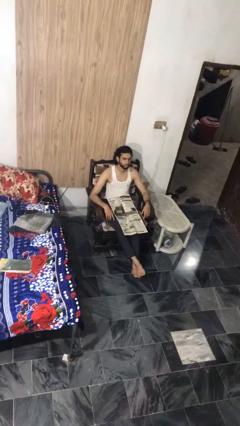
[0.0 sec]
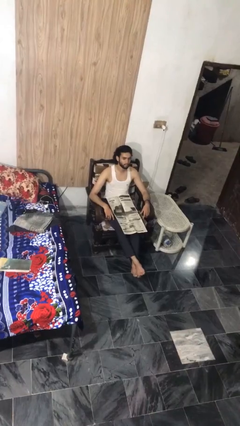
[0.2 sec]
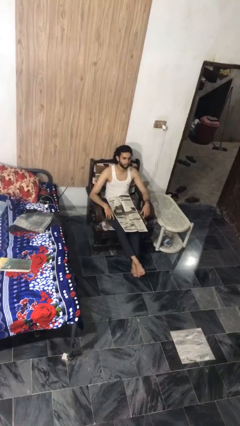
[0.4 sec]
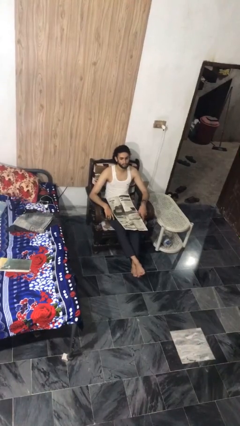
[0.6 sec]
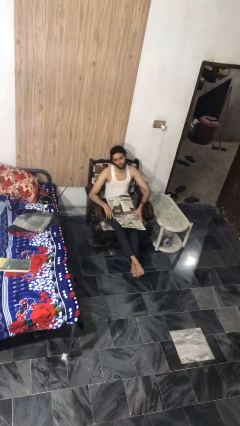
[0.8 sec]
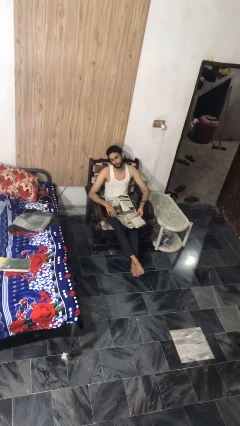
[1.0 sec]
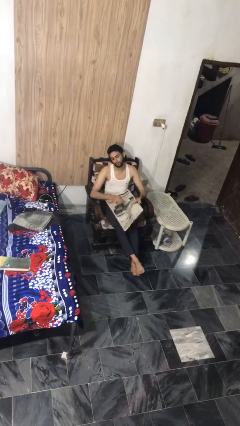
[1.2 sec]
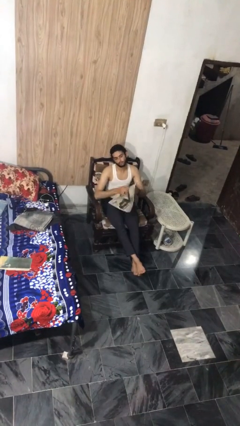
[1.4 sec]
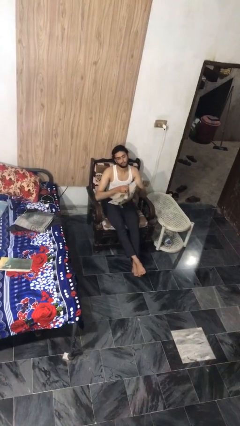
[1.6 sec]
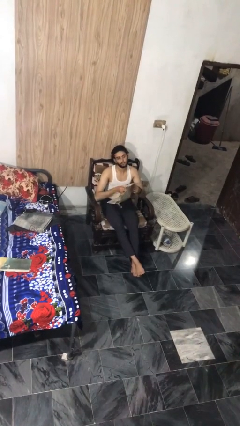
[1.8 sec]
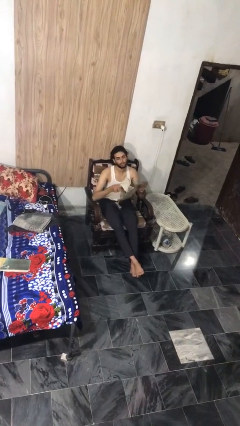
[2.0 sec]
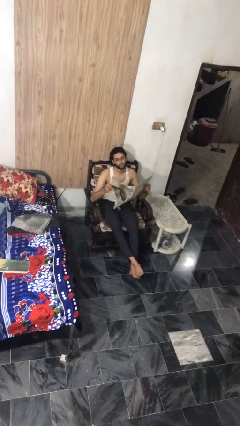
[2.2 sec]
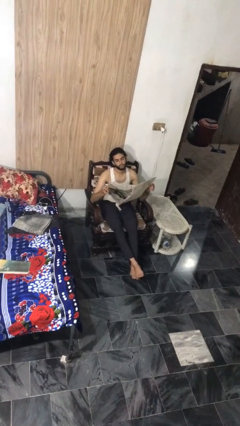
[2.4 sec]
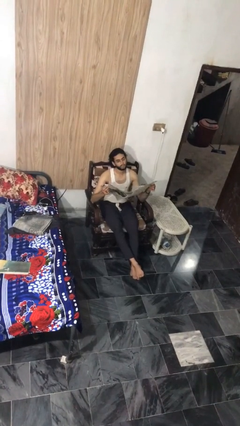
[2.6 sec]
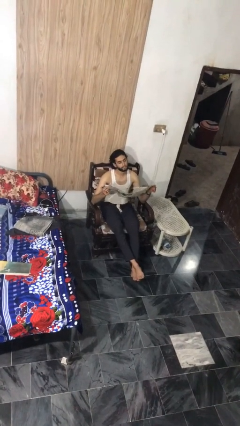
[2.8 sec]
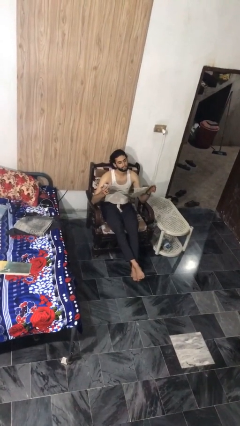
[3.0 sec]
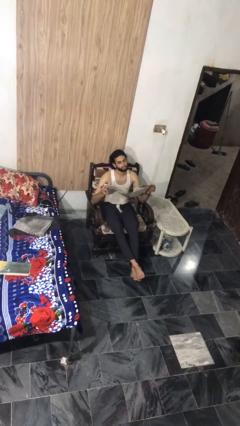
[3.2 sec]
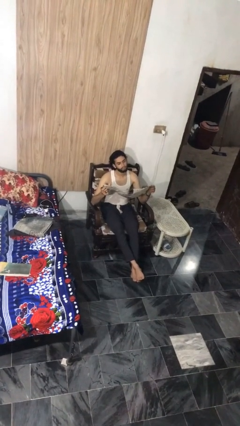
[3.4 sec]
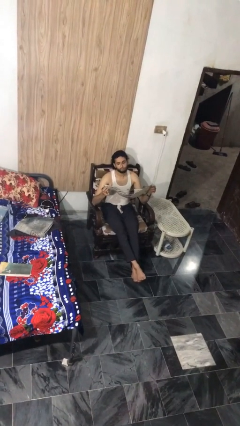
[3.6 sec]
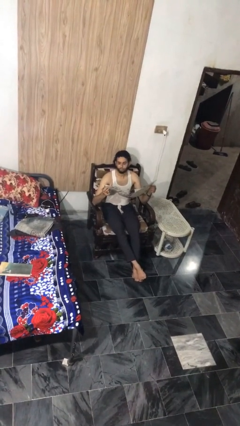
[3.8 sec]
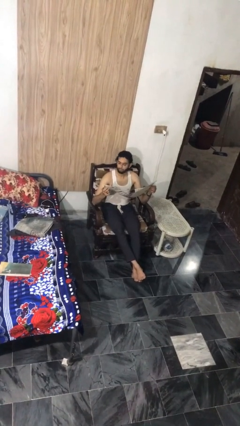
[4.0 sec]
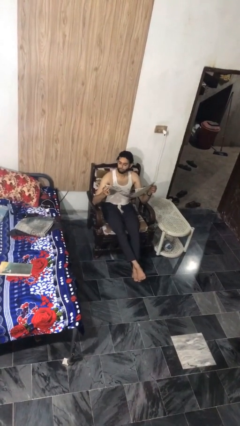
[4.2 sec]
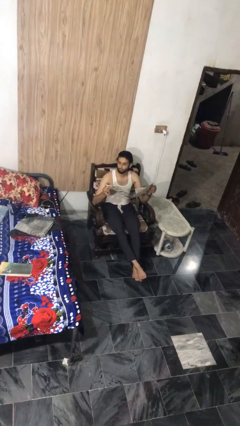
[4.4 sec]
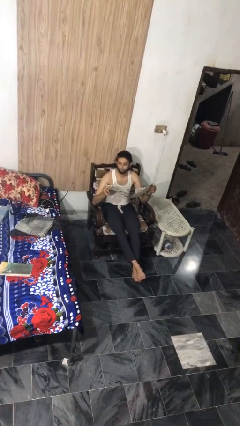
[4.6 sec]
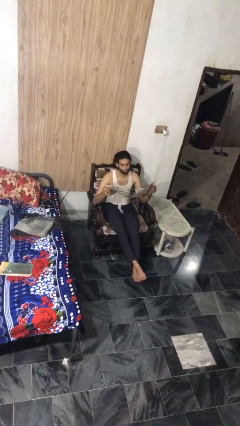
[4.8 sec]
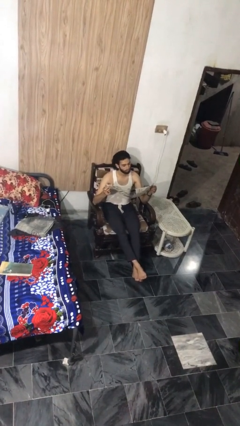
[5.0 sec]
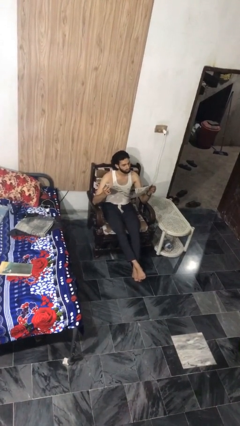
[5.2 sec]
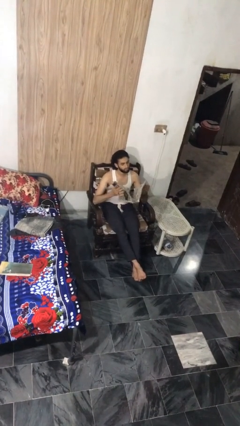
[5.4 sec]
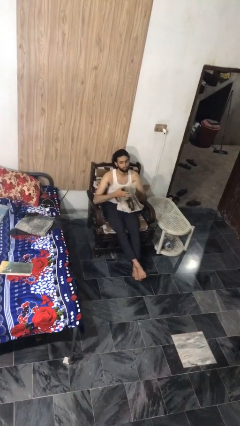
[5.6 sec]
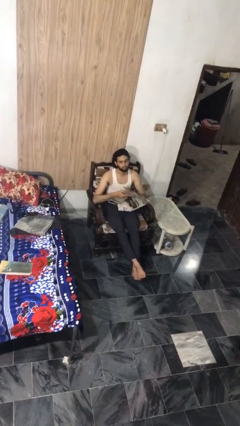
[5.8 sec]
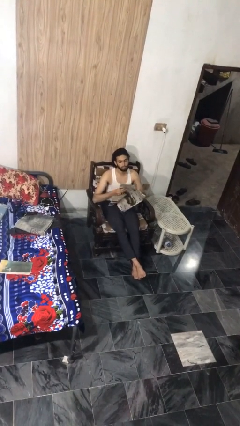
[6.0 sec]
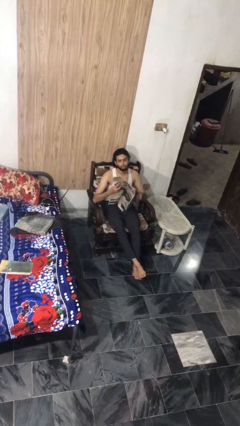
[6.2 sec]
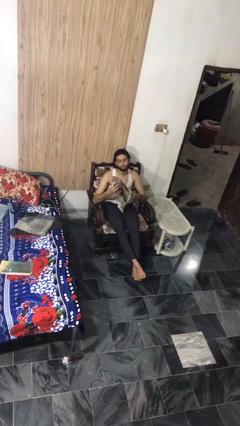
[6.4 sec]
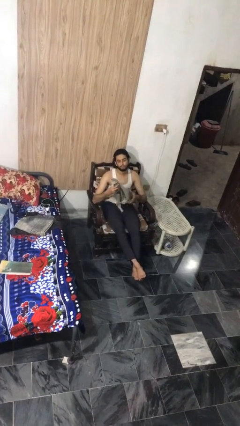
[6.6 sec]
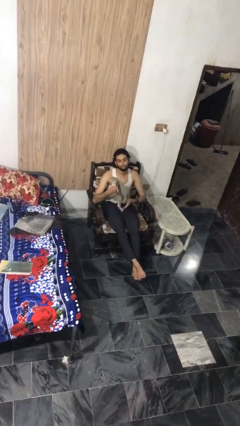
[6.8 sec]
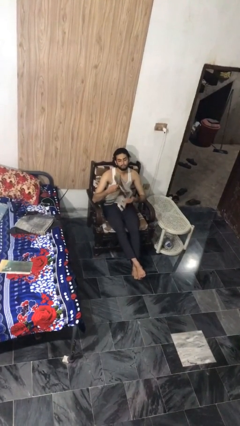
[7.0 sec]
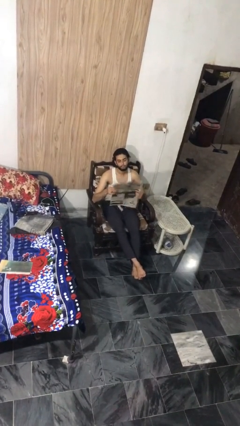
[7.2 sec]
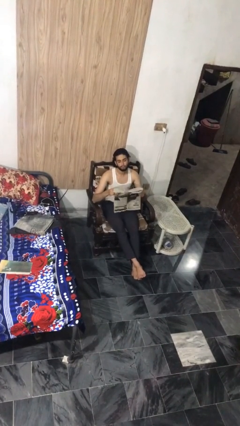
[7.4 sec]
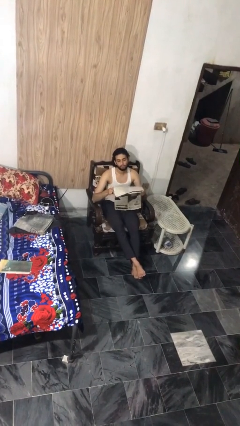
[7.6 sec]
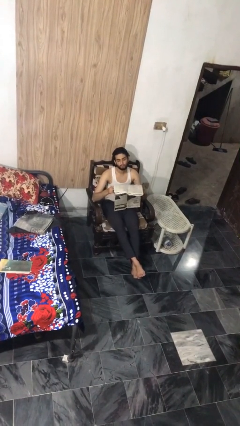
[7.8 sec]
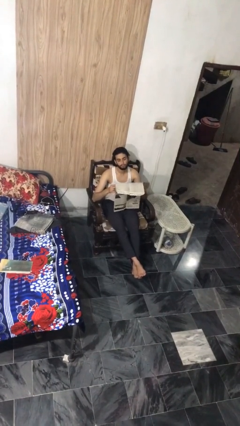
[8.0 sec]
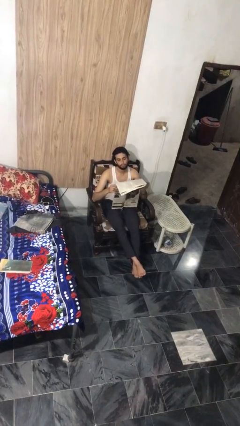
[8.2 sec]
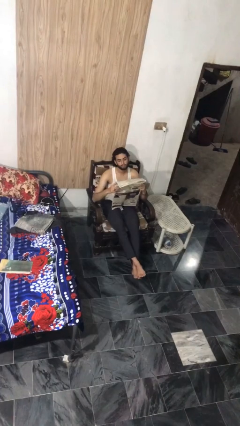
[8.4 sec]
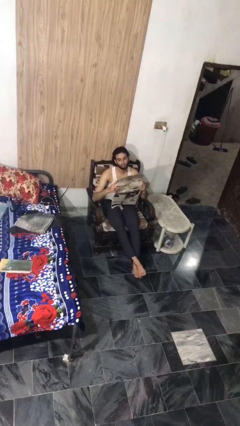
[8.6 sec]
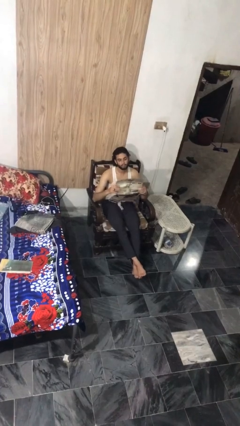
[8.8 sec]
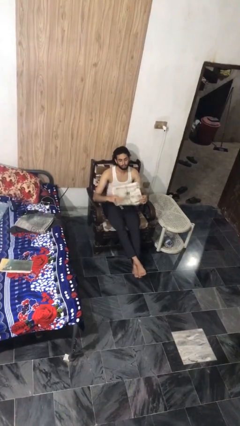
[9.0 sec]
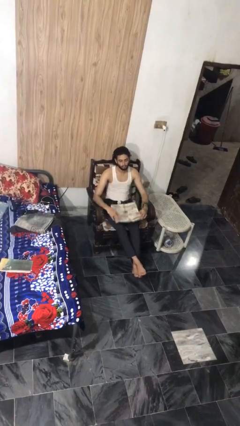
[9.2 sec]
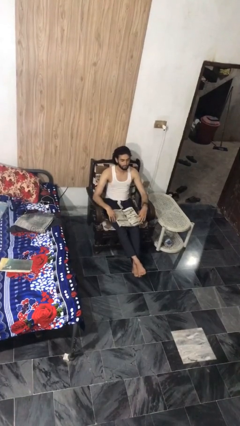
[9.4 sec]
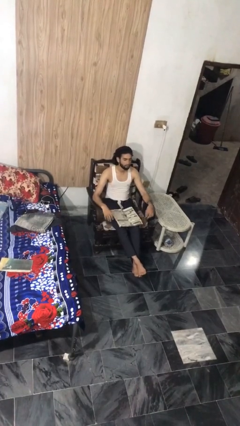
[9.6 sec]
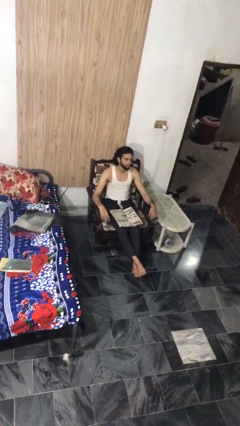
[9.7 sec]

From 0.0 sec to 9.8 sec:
person reads newspaper

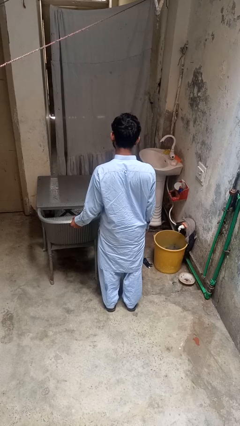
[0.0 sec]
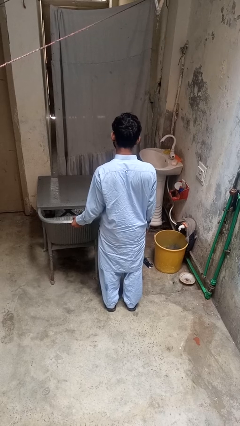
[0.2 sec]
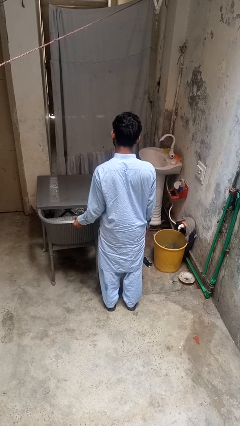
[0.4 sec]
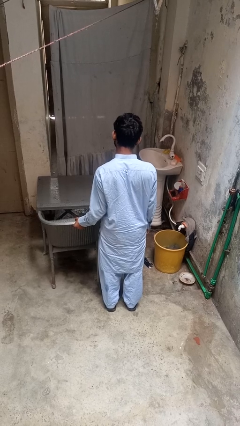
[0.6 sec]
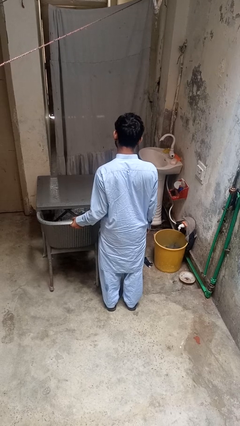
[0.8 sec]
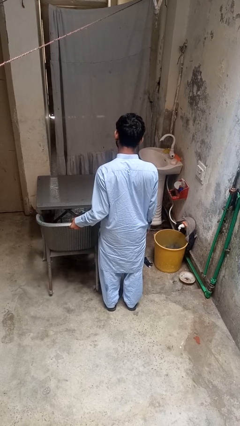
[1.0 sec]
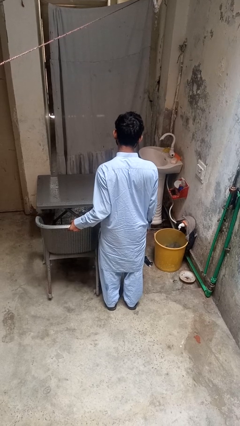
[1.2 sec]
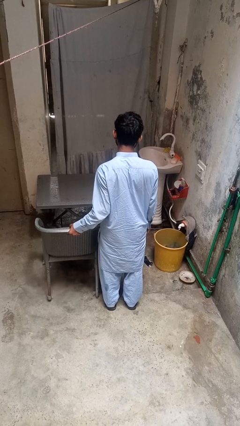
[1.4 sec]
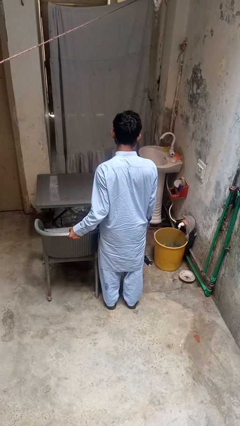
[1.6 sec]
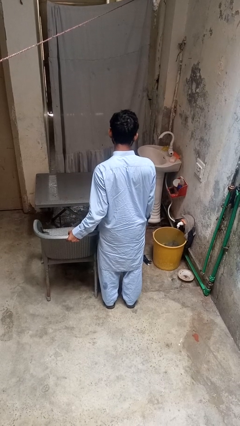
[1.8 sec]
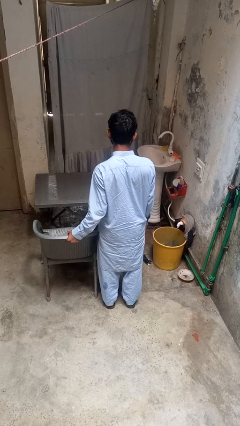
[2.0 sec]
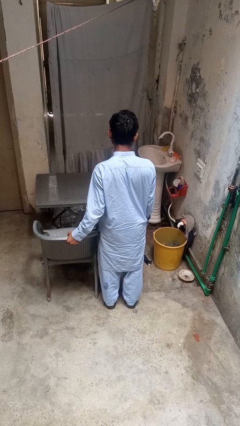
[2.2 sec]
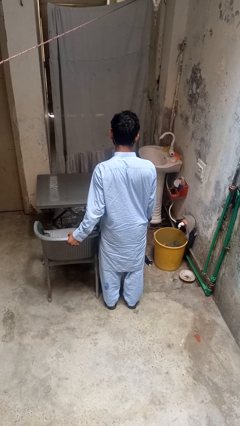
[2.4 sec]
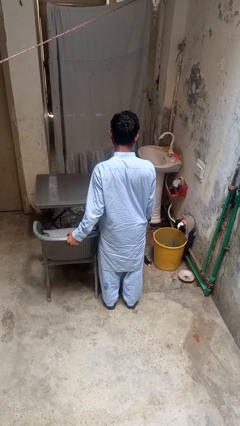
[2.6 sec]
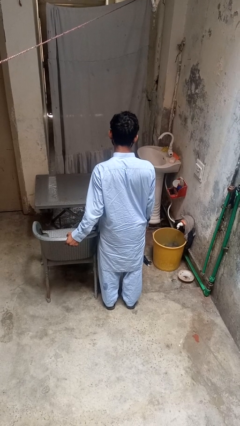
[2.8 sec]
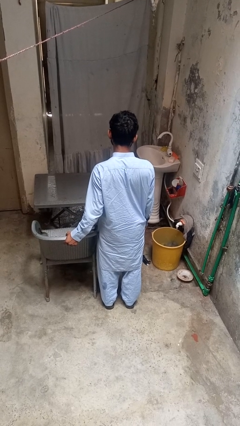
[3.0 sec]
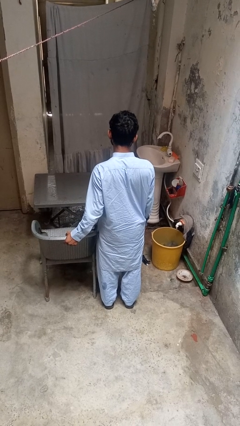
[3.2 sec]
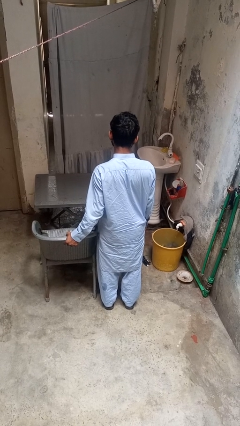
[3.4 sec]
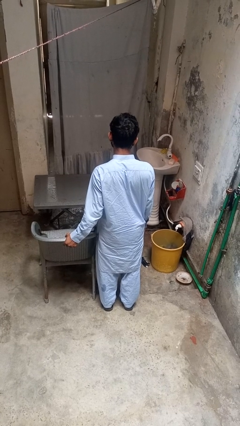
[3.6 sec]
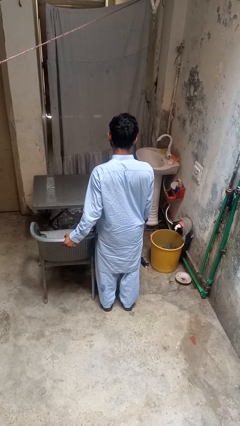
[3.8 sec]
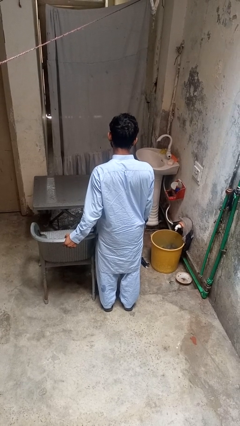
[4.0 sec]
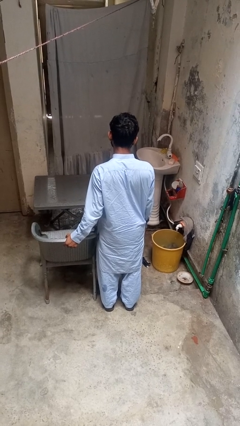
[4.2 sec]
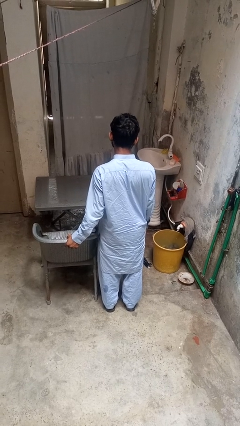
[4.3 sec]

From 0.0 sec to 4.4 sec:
person pulls out chair

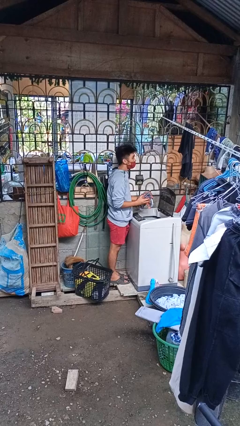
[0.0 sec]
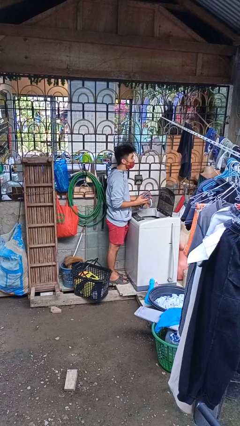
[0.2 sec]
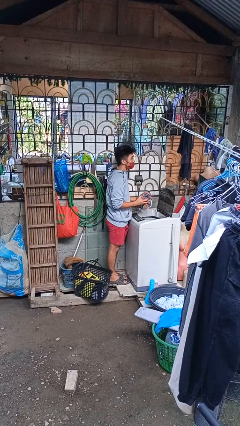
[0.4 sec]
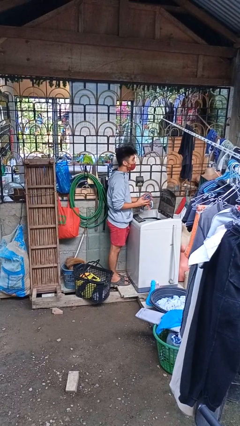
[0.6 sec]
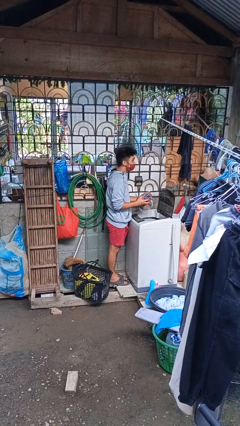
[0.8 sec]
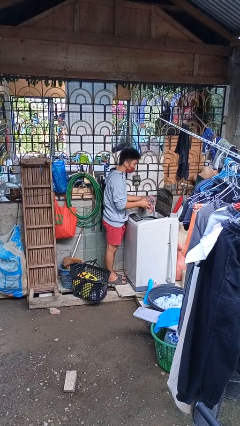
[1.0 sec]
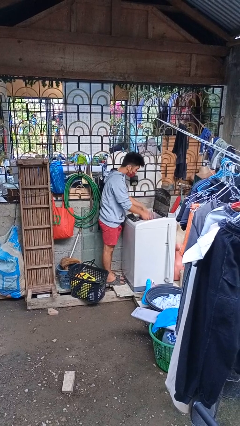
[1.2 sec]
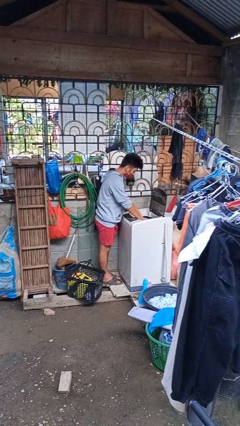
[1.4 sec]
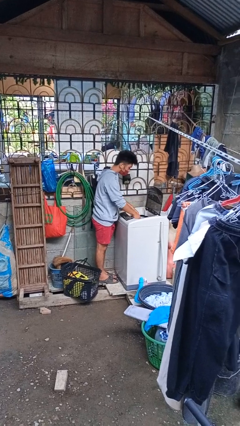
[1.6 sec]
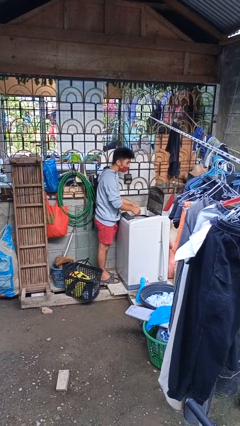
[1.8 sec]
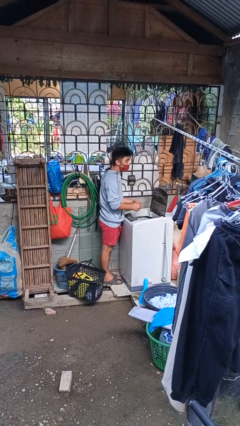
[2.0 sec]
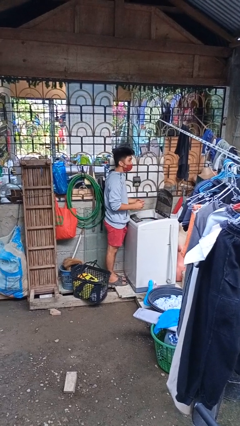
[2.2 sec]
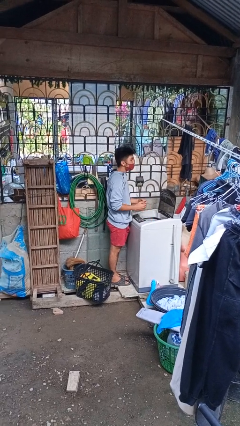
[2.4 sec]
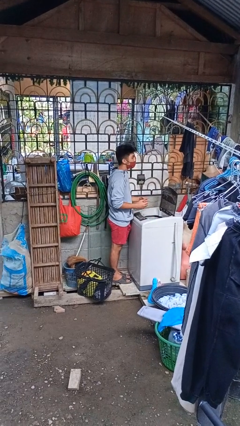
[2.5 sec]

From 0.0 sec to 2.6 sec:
person loads dryer

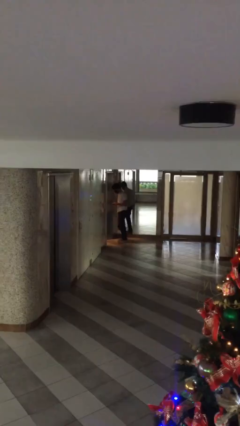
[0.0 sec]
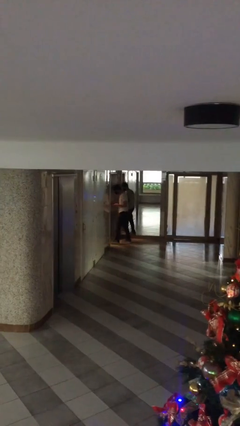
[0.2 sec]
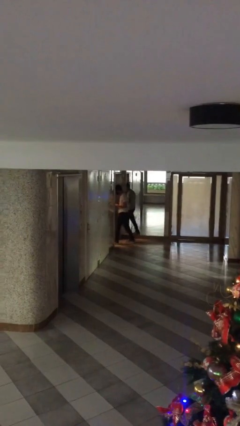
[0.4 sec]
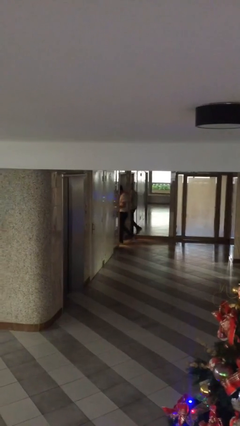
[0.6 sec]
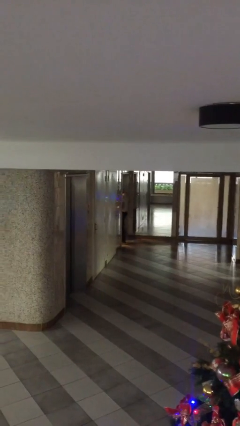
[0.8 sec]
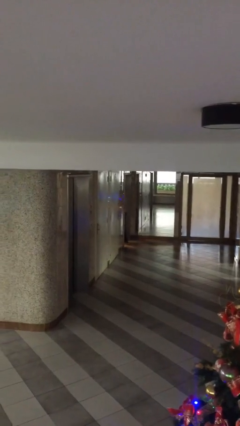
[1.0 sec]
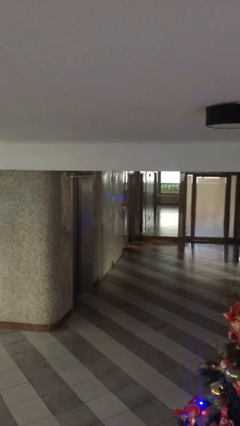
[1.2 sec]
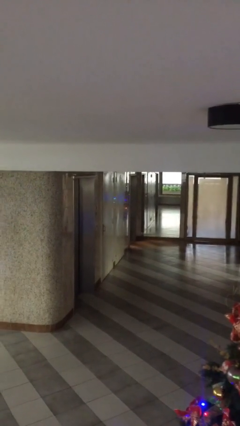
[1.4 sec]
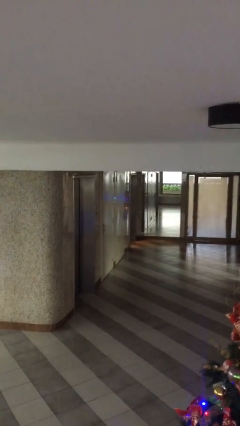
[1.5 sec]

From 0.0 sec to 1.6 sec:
person exits scene through structure
